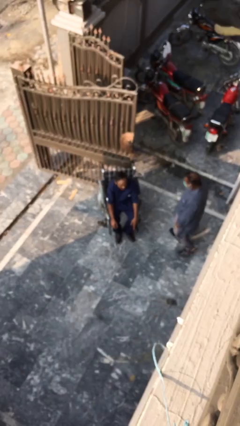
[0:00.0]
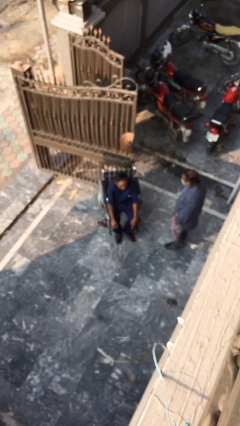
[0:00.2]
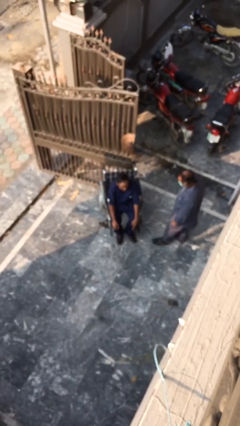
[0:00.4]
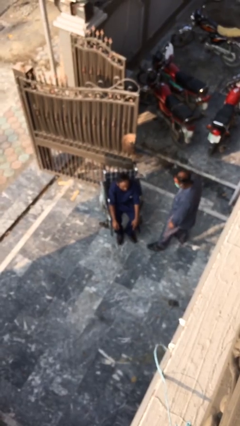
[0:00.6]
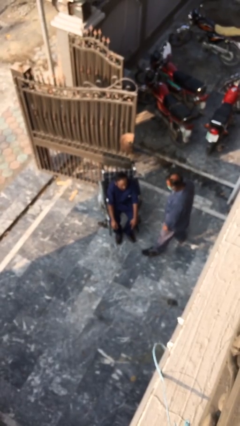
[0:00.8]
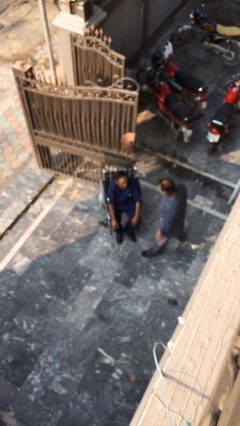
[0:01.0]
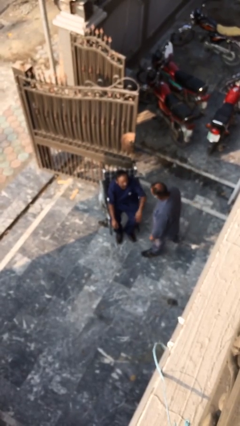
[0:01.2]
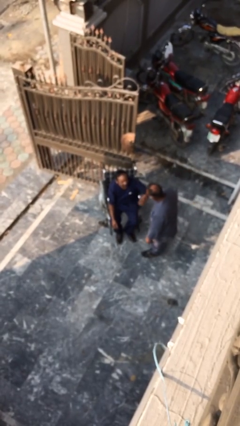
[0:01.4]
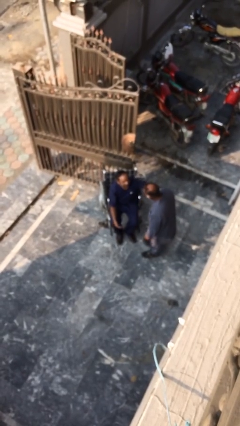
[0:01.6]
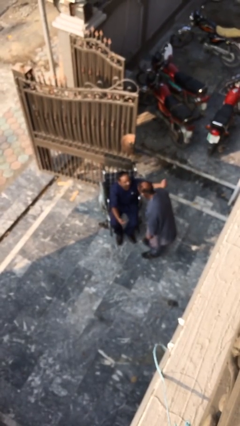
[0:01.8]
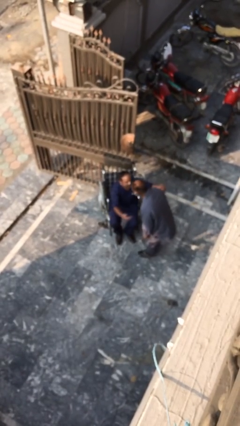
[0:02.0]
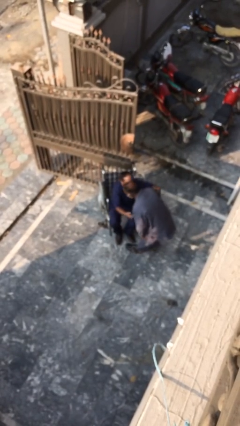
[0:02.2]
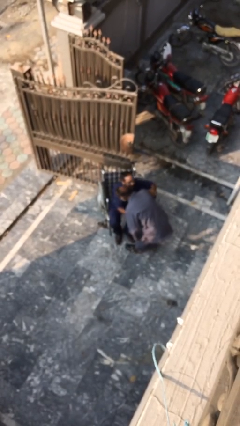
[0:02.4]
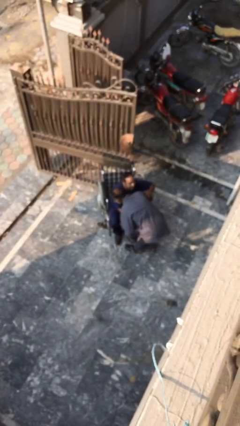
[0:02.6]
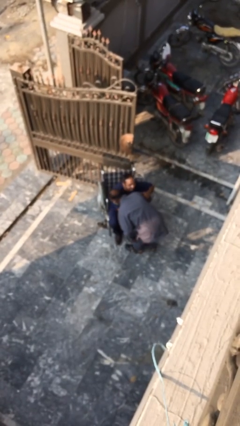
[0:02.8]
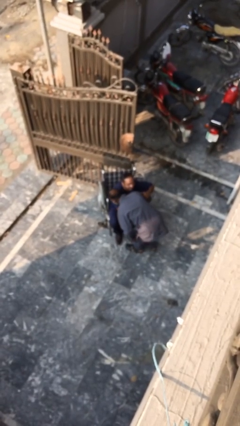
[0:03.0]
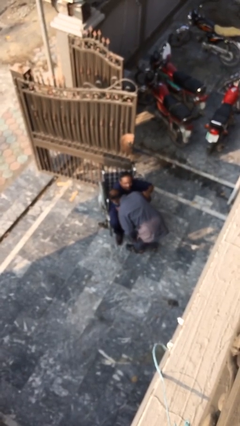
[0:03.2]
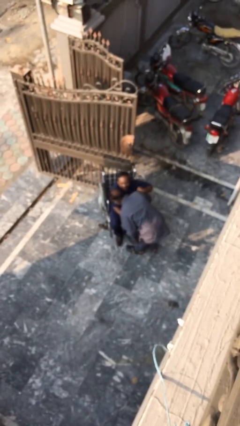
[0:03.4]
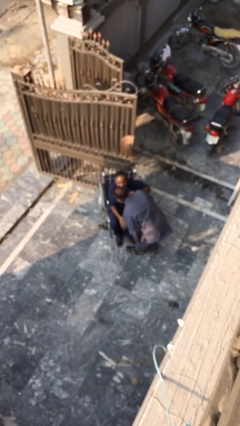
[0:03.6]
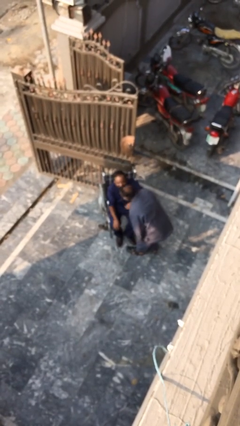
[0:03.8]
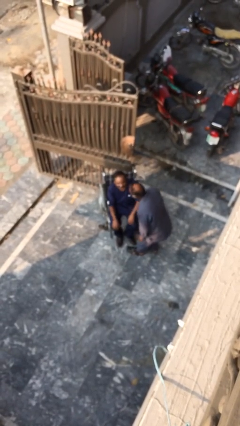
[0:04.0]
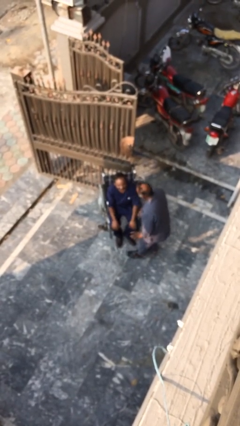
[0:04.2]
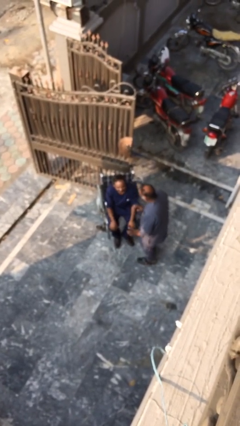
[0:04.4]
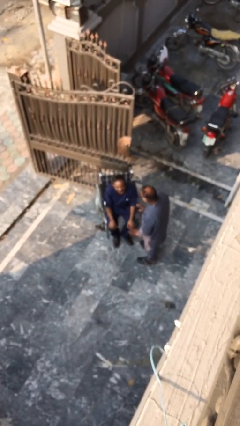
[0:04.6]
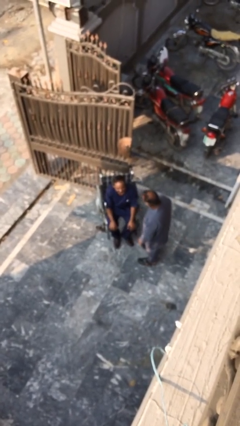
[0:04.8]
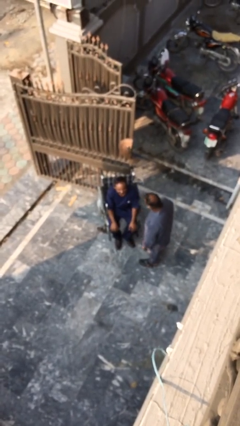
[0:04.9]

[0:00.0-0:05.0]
person embraces person

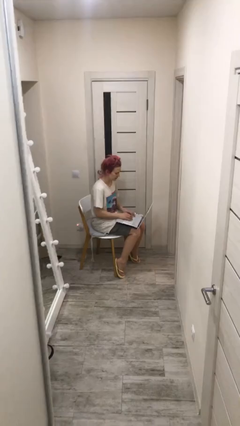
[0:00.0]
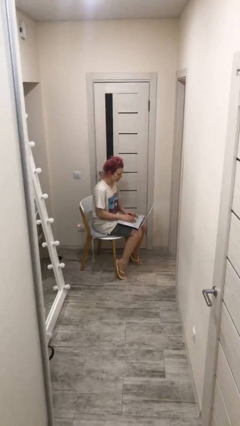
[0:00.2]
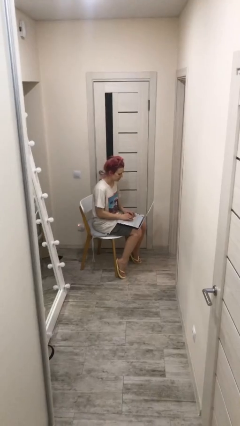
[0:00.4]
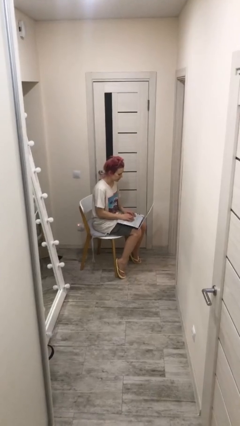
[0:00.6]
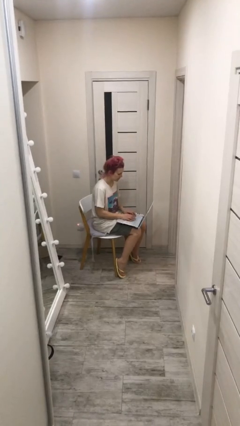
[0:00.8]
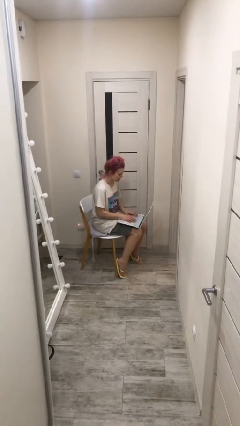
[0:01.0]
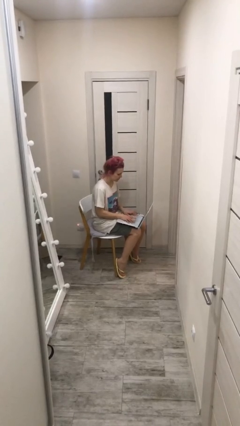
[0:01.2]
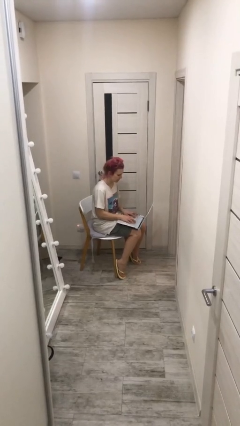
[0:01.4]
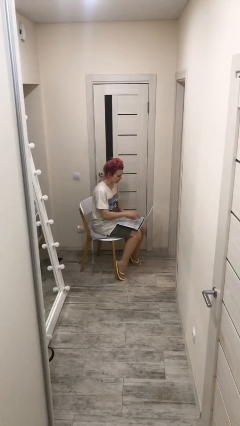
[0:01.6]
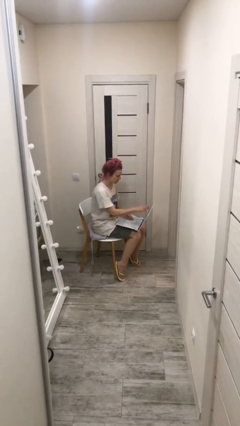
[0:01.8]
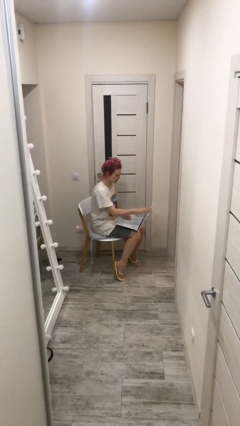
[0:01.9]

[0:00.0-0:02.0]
person interacts with laptop

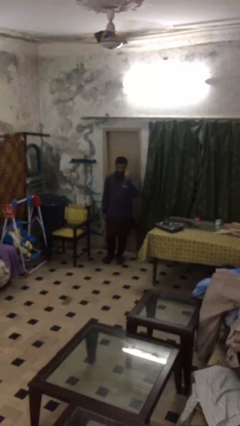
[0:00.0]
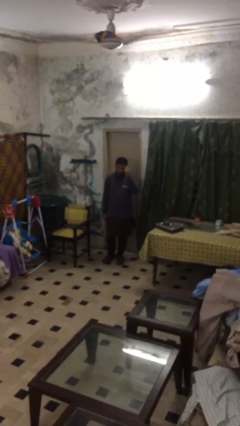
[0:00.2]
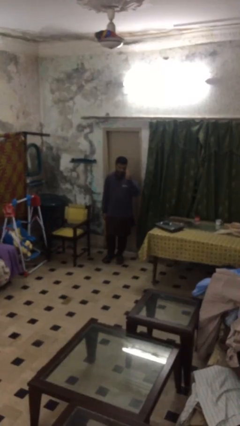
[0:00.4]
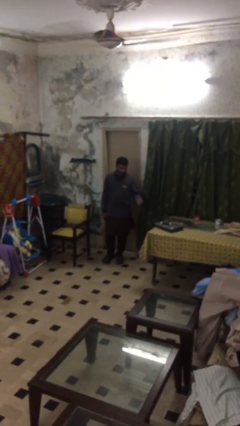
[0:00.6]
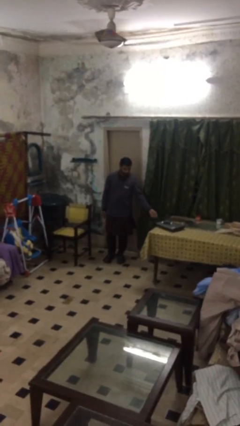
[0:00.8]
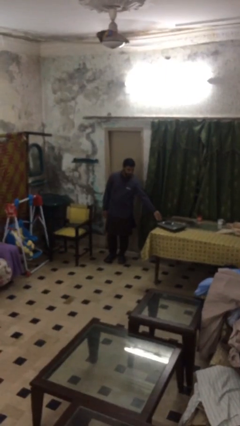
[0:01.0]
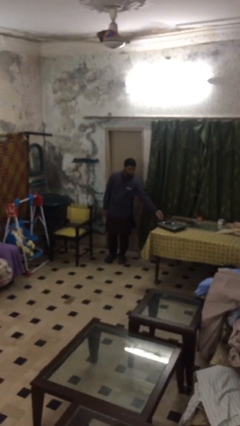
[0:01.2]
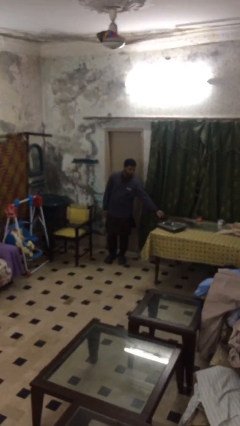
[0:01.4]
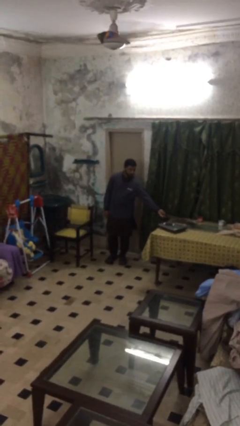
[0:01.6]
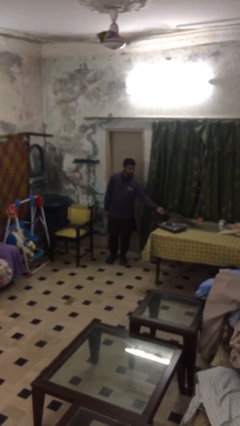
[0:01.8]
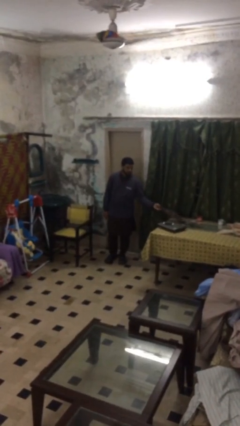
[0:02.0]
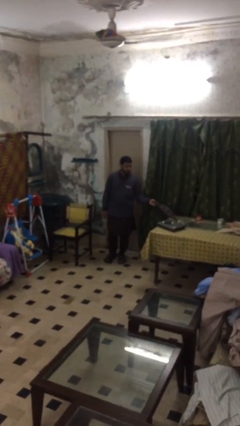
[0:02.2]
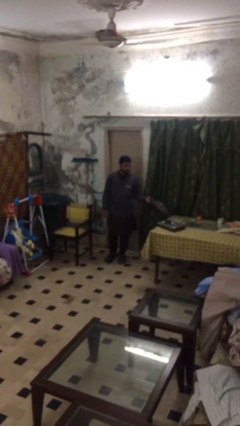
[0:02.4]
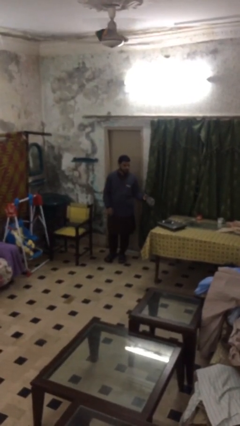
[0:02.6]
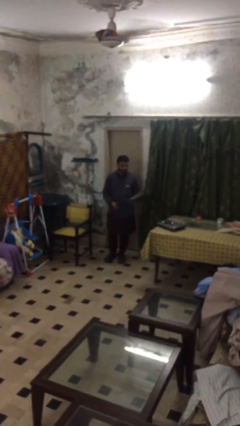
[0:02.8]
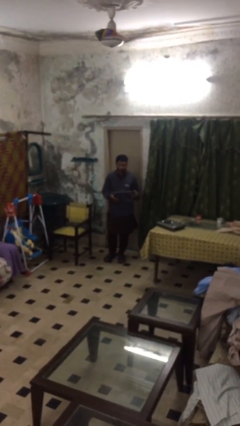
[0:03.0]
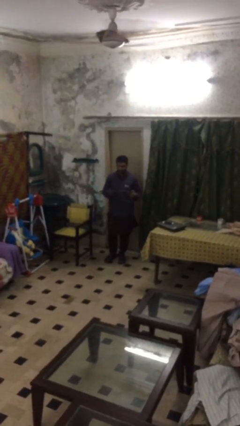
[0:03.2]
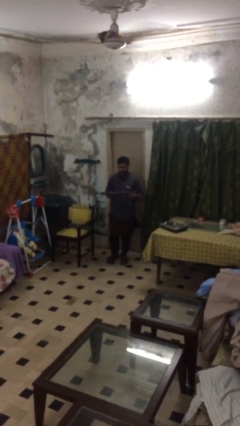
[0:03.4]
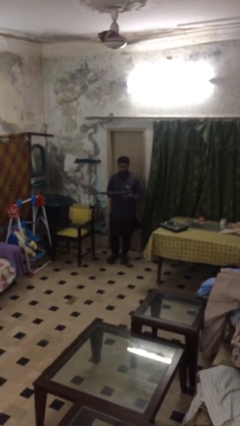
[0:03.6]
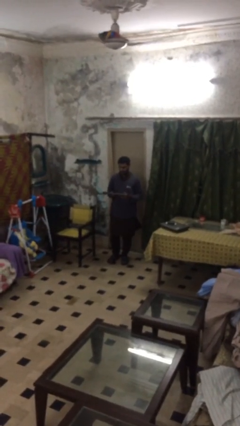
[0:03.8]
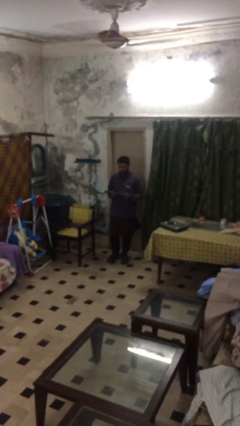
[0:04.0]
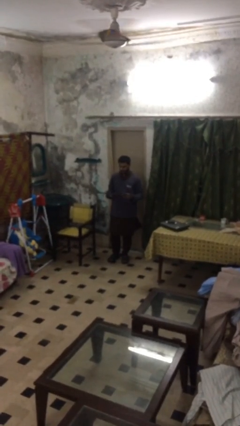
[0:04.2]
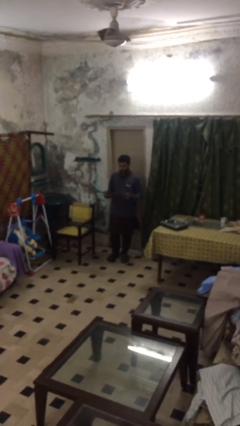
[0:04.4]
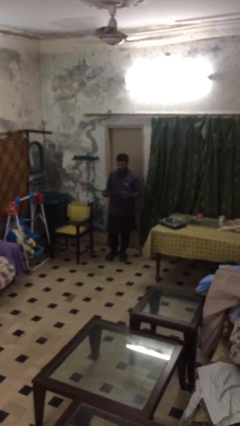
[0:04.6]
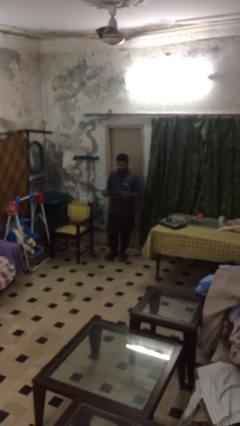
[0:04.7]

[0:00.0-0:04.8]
person picks up object from table

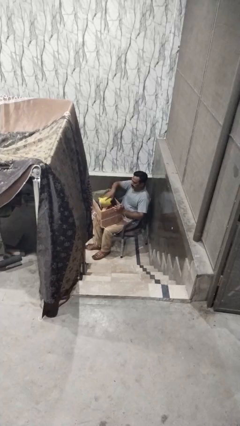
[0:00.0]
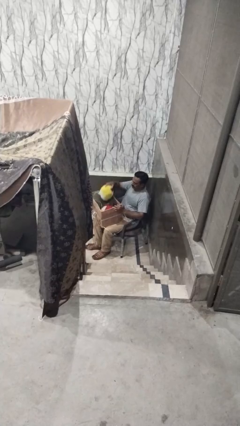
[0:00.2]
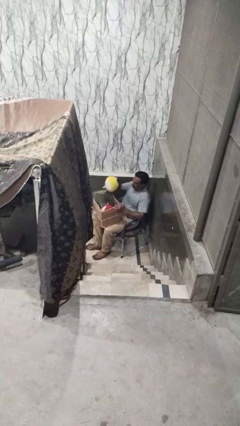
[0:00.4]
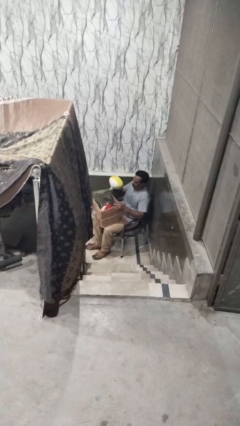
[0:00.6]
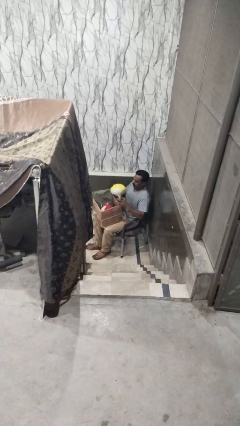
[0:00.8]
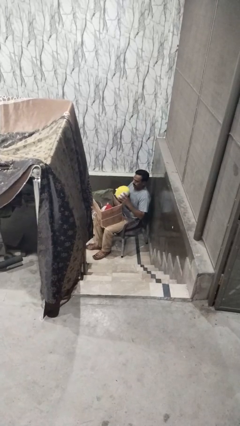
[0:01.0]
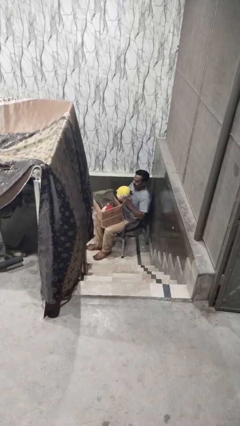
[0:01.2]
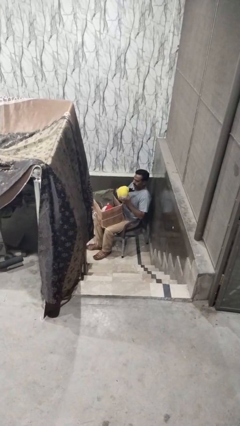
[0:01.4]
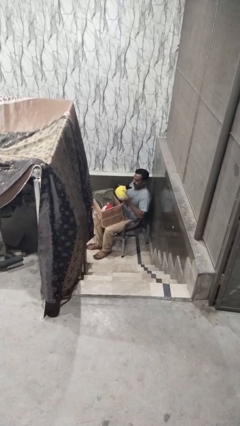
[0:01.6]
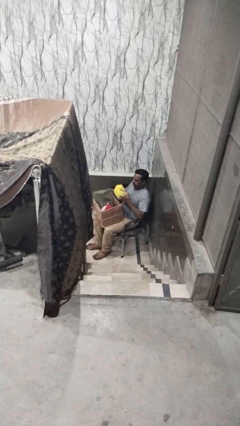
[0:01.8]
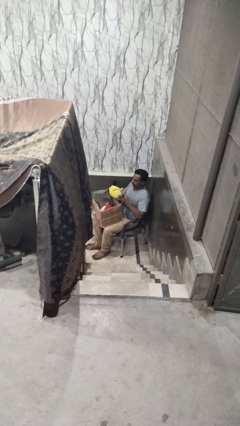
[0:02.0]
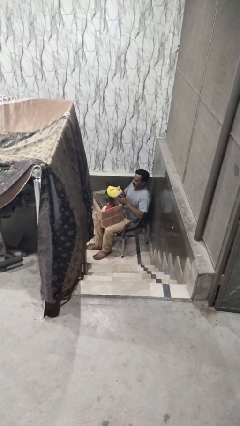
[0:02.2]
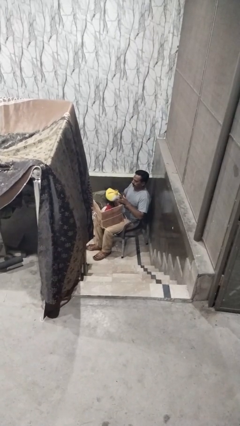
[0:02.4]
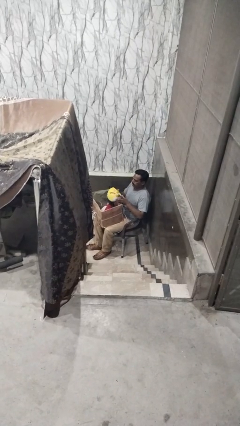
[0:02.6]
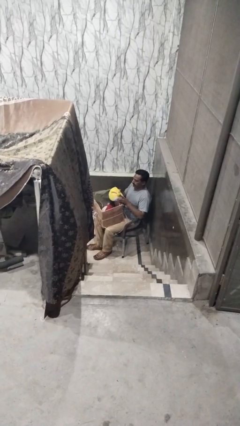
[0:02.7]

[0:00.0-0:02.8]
person takes object from box

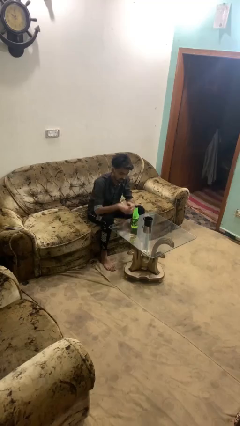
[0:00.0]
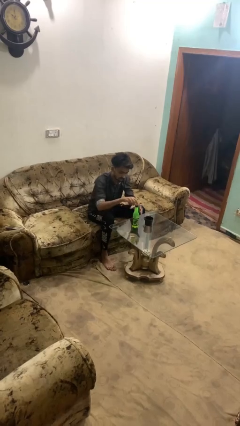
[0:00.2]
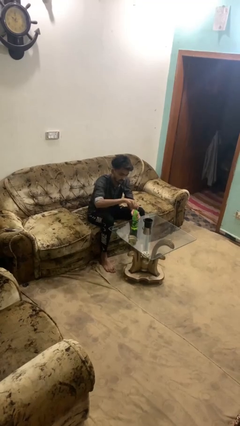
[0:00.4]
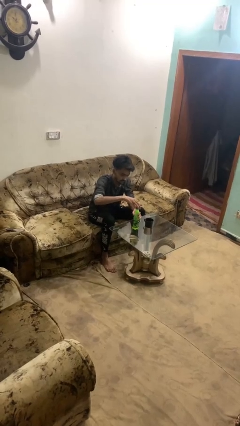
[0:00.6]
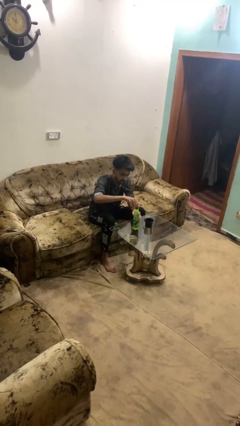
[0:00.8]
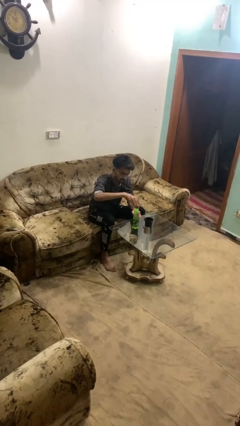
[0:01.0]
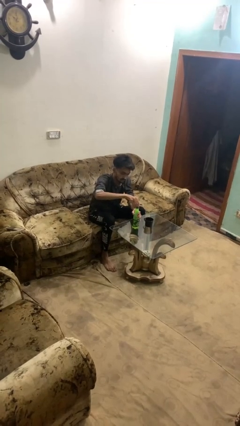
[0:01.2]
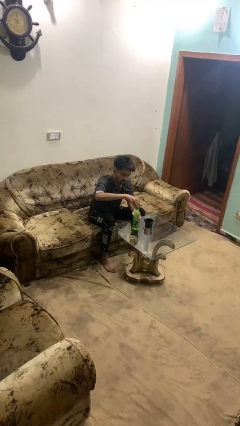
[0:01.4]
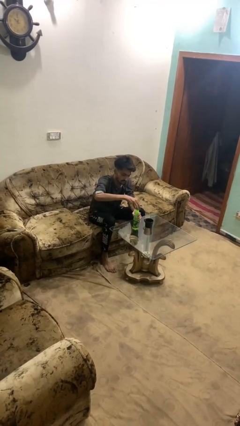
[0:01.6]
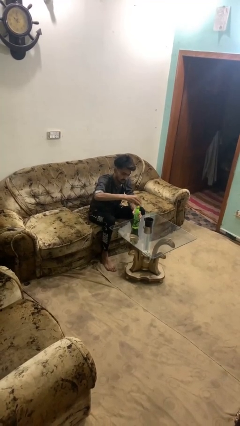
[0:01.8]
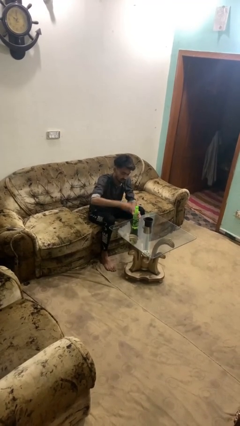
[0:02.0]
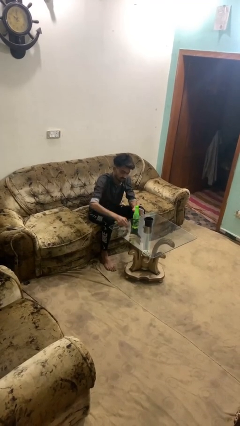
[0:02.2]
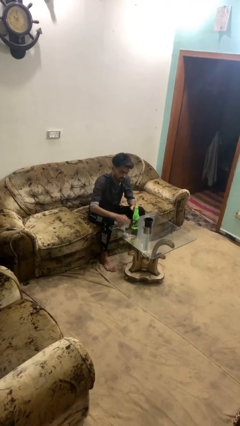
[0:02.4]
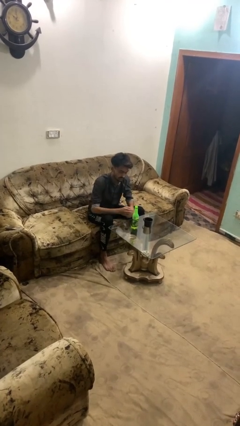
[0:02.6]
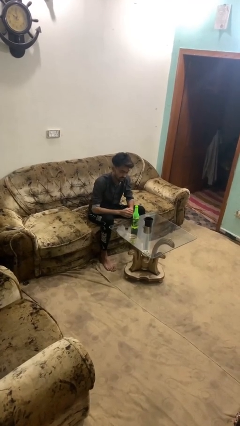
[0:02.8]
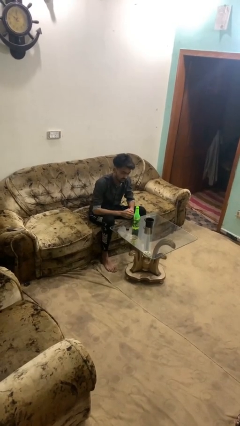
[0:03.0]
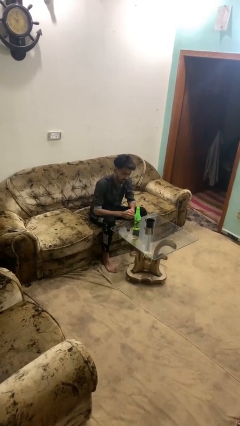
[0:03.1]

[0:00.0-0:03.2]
person unscrews lid from bottle
